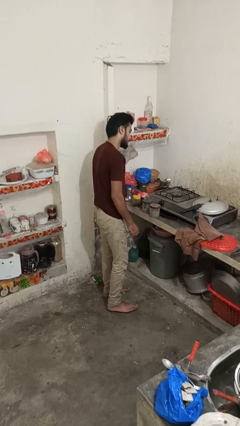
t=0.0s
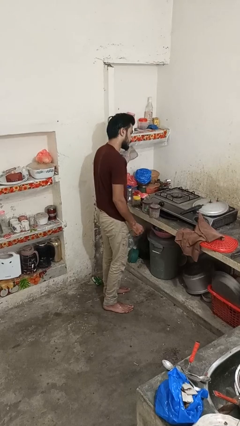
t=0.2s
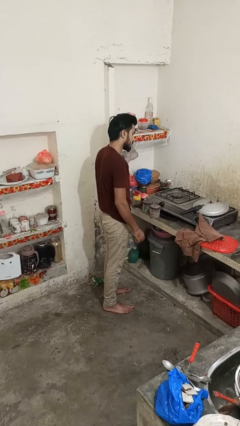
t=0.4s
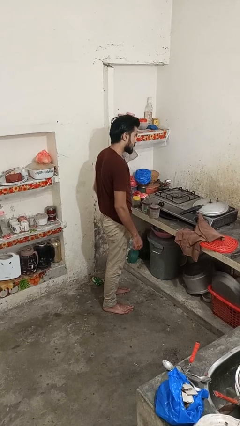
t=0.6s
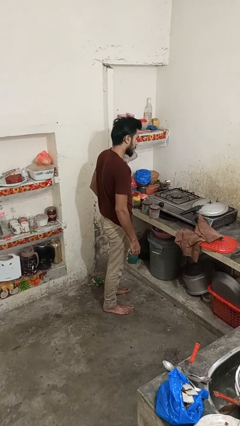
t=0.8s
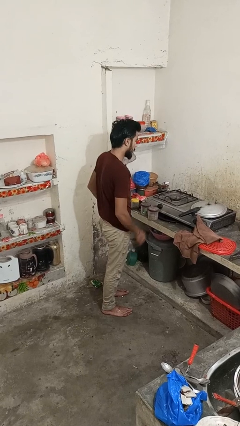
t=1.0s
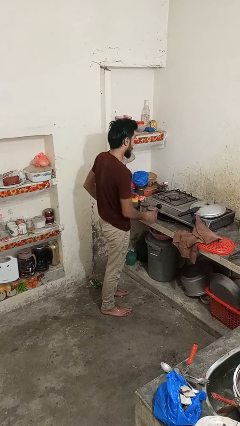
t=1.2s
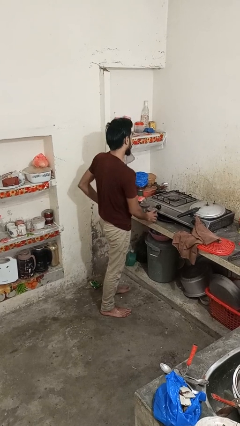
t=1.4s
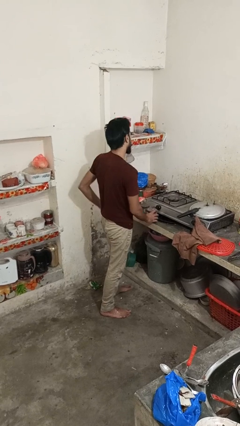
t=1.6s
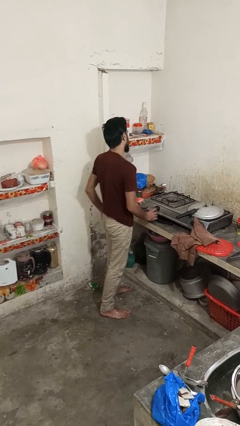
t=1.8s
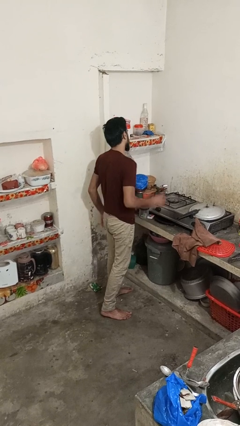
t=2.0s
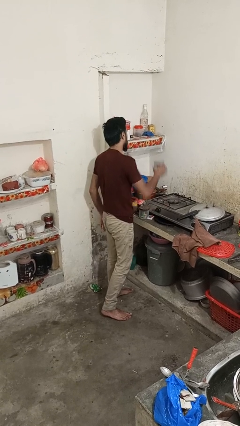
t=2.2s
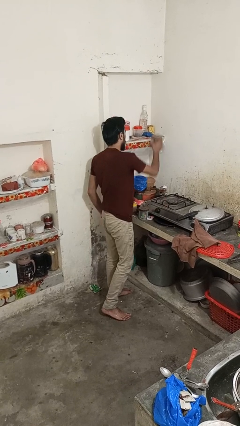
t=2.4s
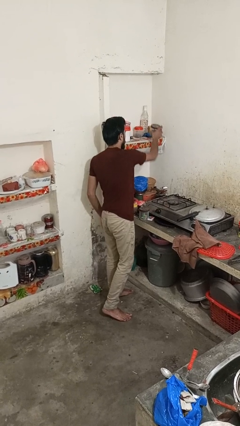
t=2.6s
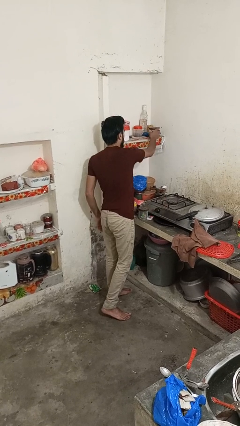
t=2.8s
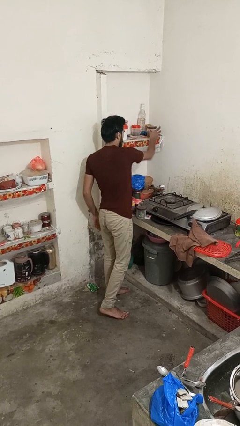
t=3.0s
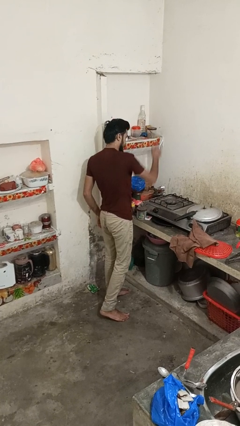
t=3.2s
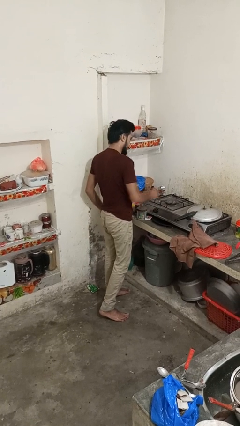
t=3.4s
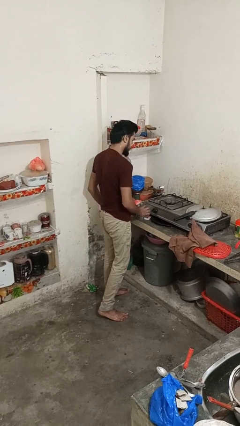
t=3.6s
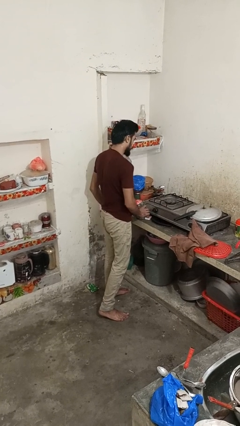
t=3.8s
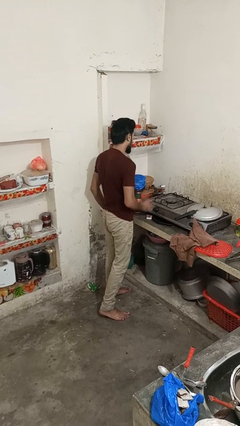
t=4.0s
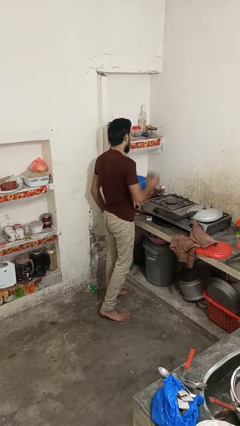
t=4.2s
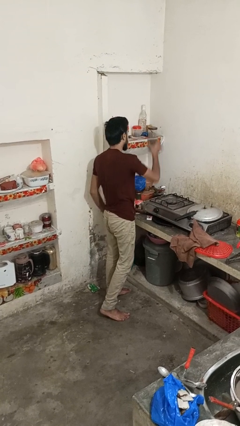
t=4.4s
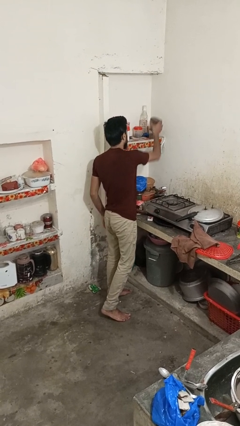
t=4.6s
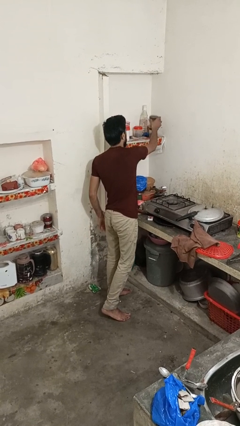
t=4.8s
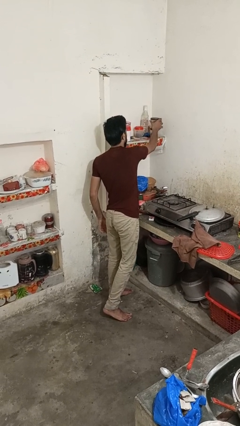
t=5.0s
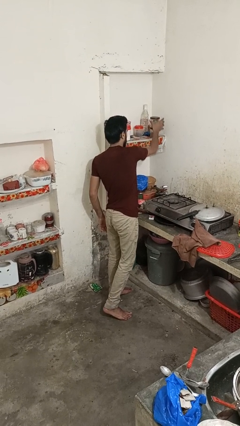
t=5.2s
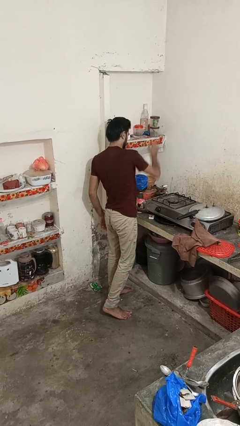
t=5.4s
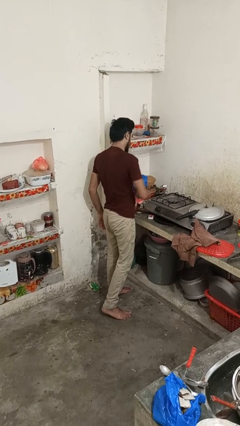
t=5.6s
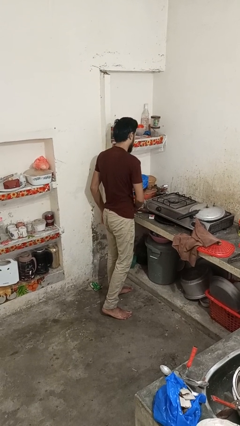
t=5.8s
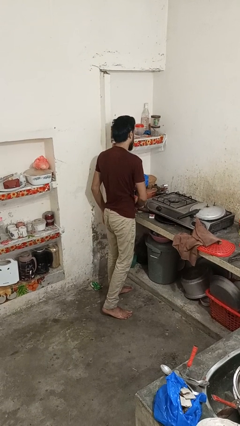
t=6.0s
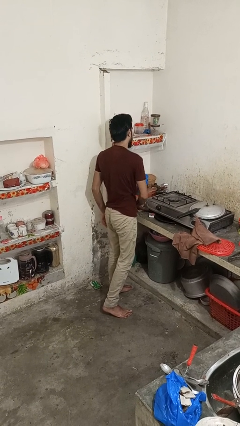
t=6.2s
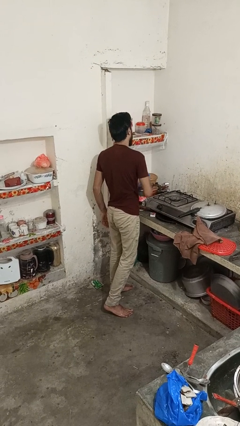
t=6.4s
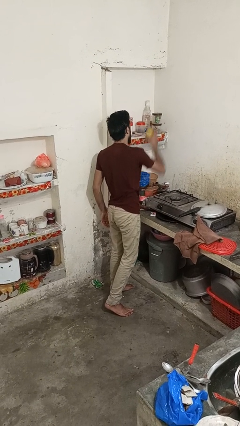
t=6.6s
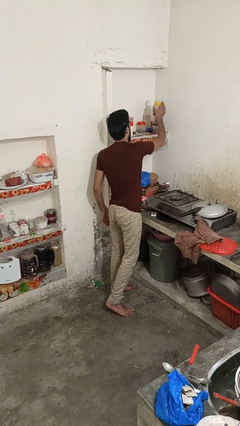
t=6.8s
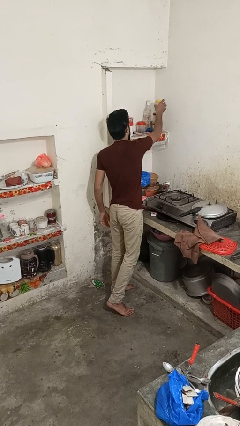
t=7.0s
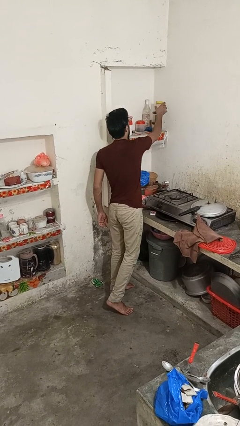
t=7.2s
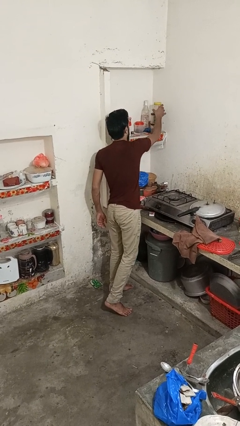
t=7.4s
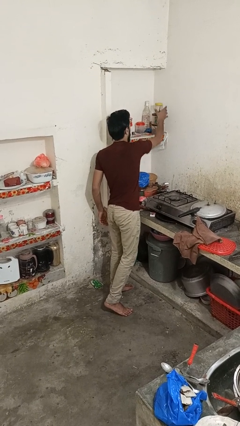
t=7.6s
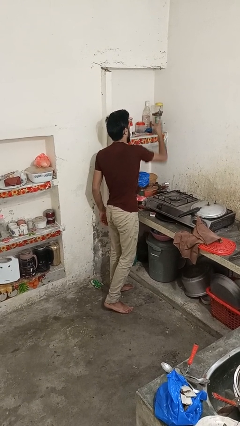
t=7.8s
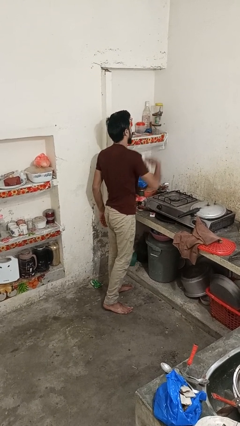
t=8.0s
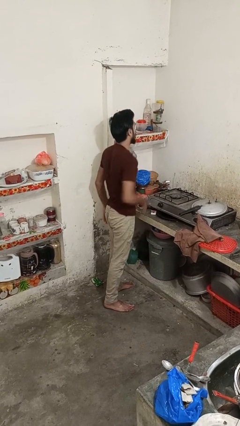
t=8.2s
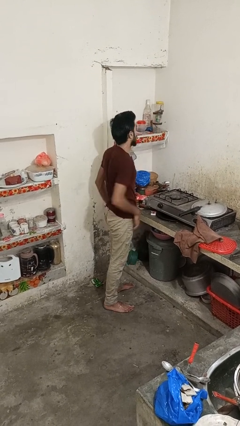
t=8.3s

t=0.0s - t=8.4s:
person loads groceries into cabinet

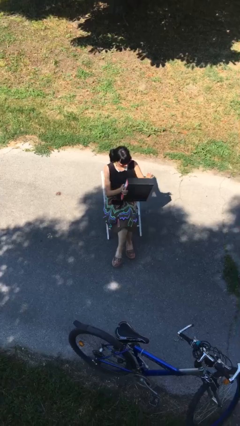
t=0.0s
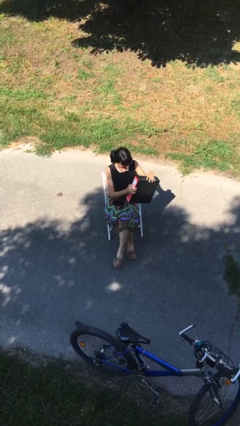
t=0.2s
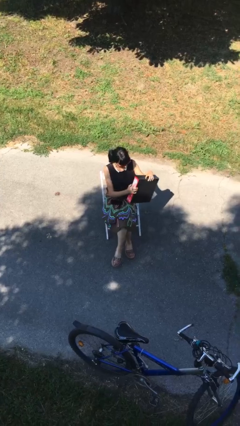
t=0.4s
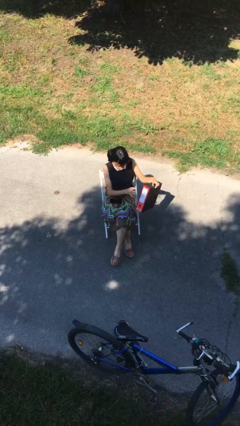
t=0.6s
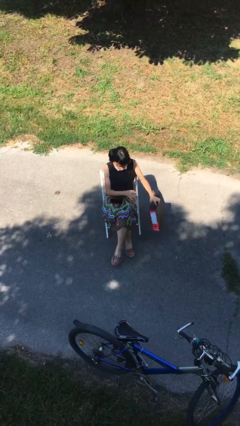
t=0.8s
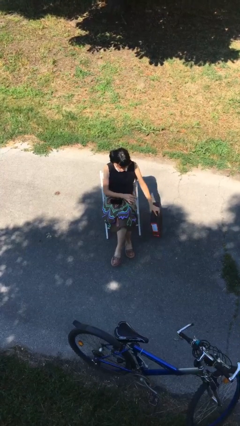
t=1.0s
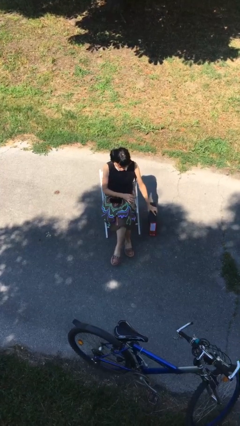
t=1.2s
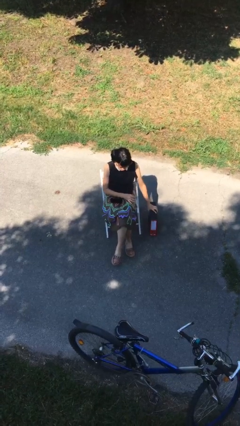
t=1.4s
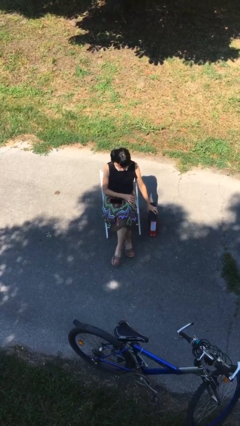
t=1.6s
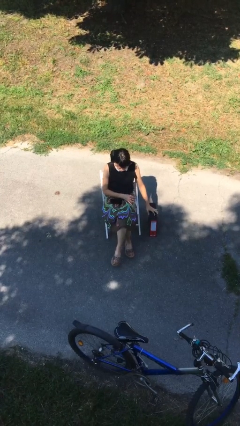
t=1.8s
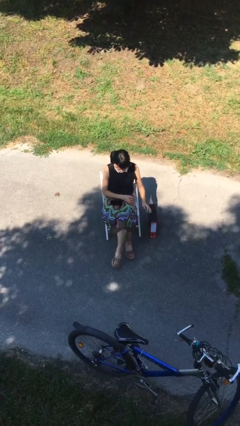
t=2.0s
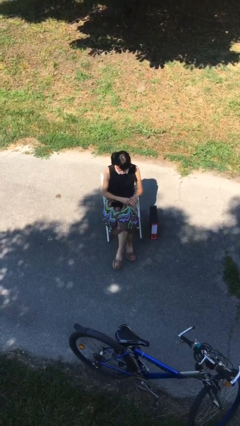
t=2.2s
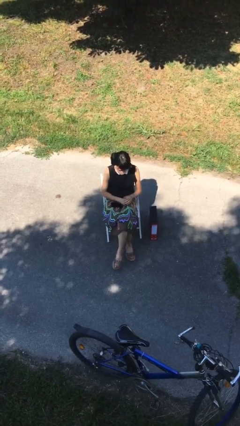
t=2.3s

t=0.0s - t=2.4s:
person puts down object on floor

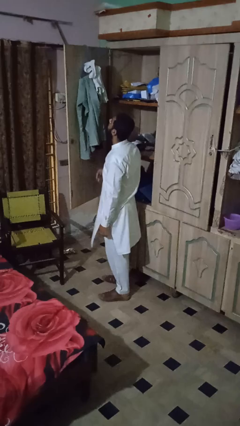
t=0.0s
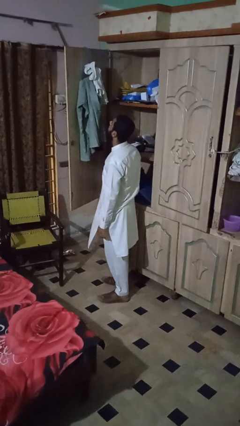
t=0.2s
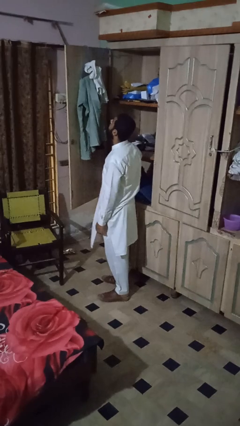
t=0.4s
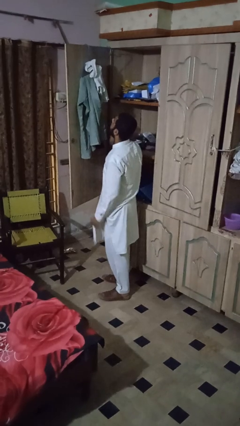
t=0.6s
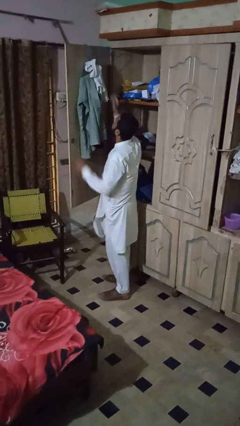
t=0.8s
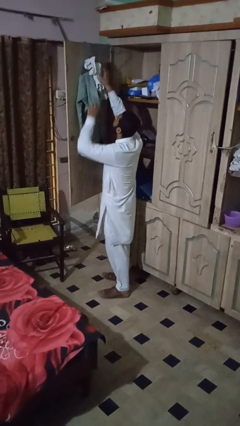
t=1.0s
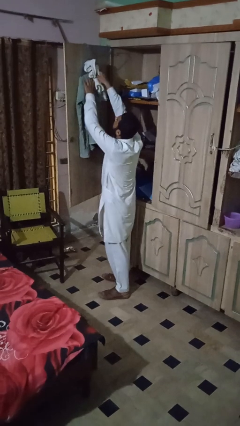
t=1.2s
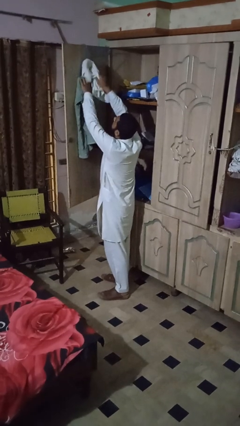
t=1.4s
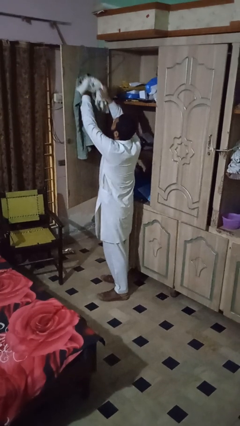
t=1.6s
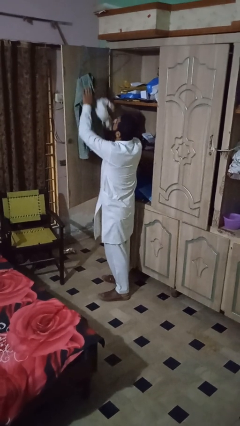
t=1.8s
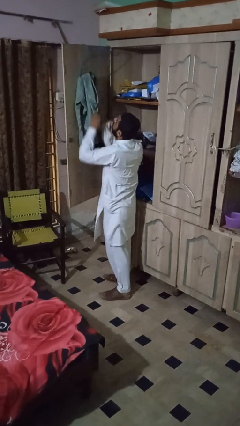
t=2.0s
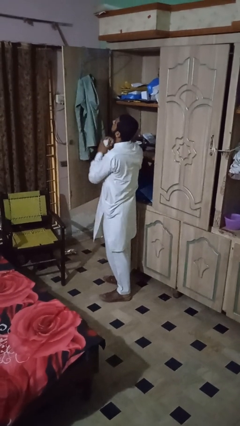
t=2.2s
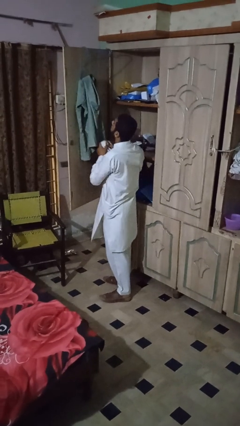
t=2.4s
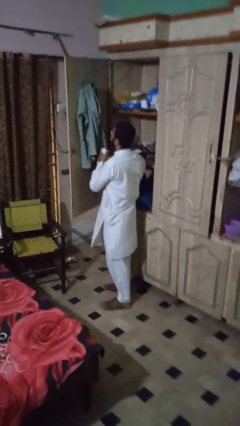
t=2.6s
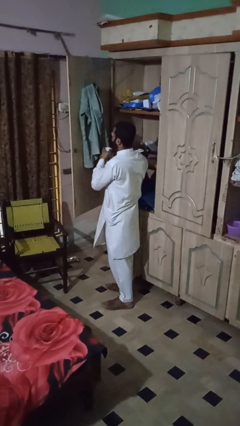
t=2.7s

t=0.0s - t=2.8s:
person takes clothes from closet

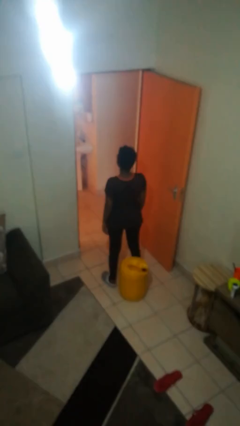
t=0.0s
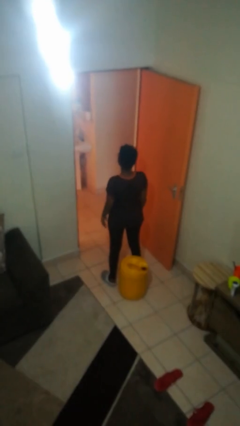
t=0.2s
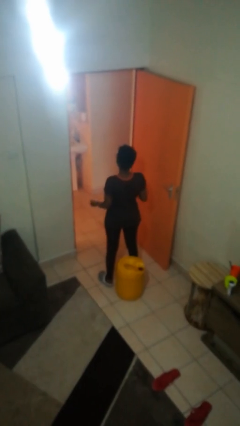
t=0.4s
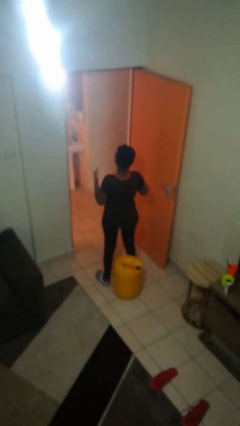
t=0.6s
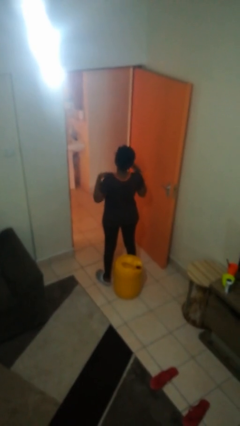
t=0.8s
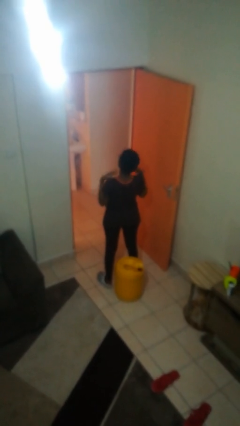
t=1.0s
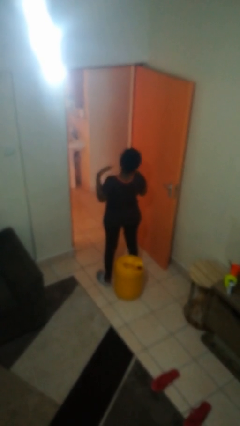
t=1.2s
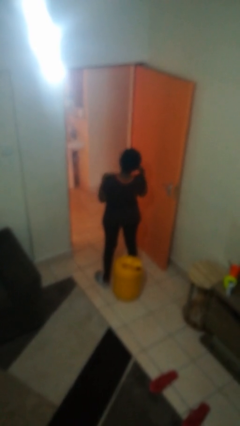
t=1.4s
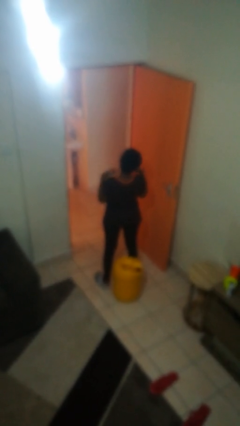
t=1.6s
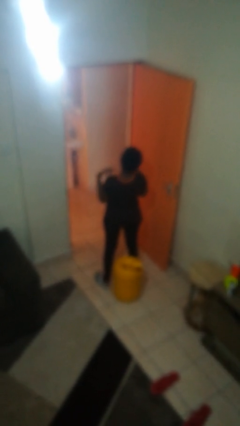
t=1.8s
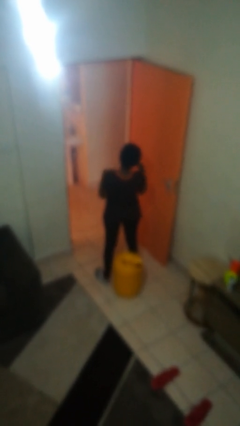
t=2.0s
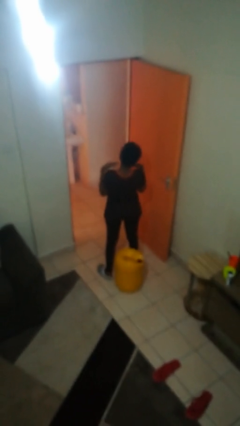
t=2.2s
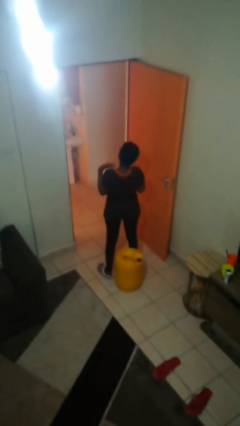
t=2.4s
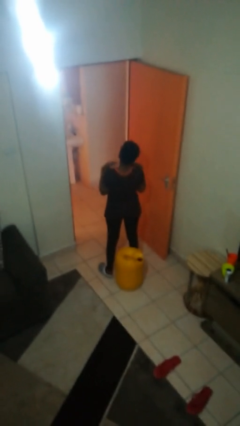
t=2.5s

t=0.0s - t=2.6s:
person drums on chest

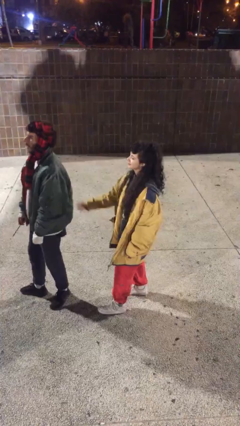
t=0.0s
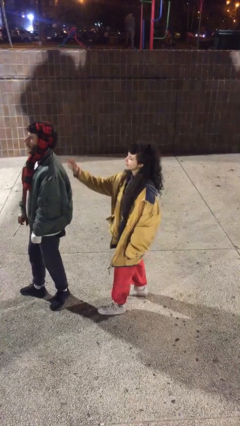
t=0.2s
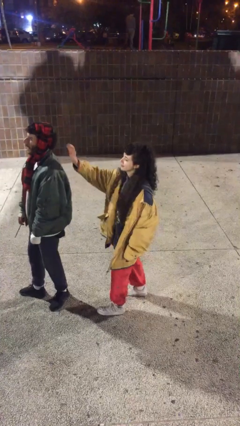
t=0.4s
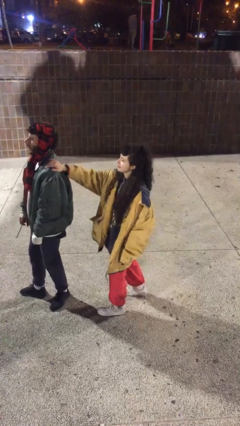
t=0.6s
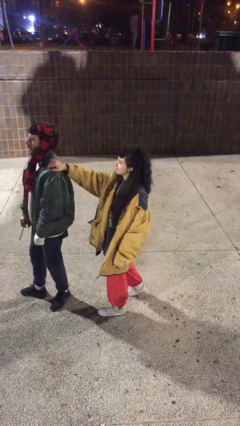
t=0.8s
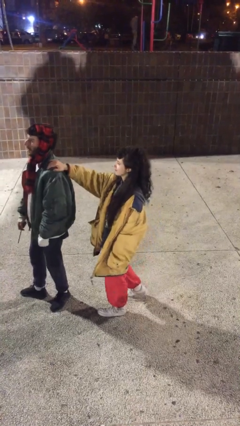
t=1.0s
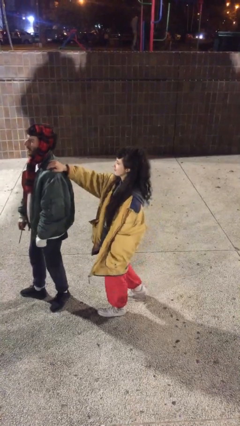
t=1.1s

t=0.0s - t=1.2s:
person grabs person by shoulder
